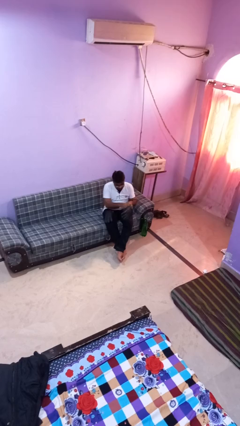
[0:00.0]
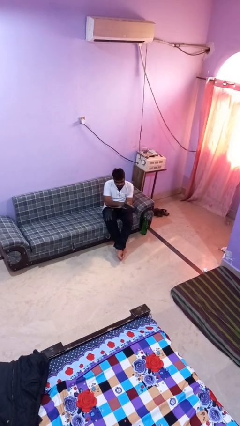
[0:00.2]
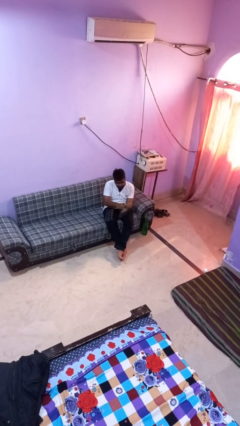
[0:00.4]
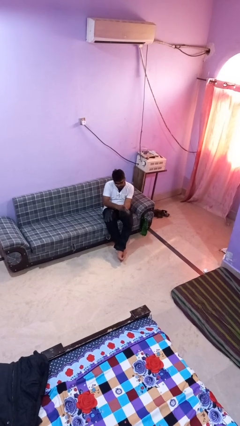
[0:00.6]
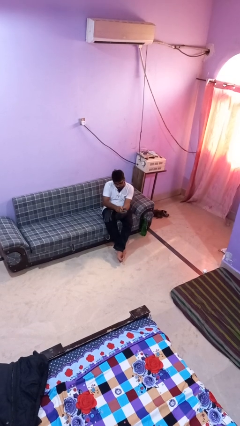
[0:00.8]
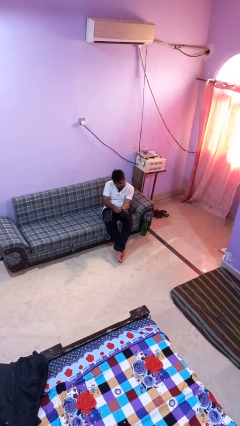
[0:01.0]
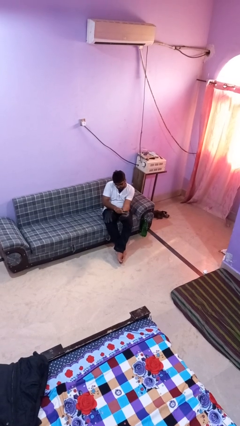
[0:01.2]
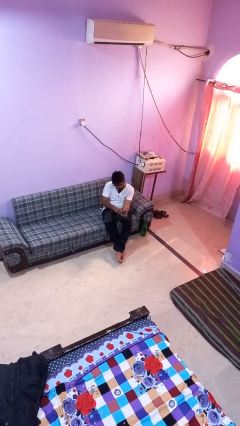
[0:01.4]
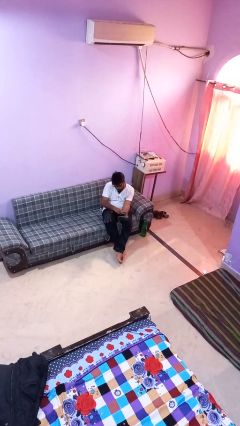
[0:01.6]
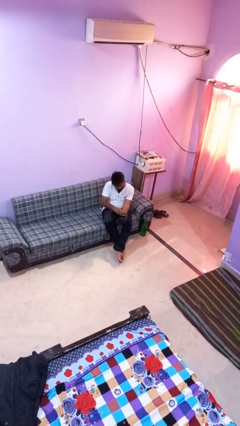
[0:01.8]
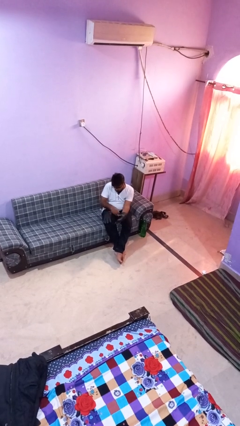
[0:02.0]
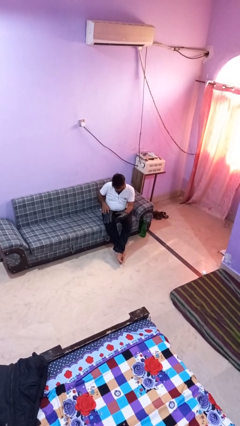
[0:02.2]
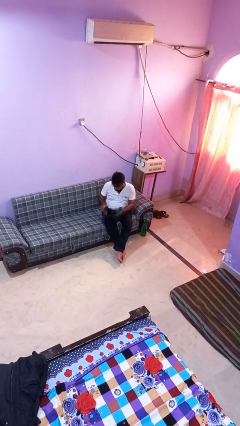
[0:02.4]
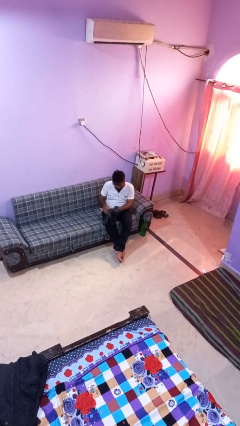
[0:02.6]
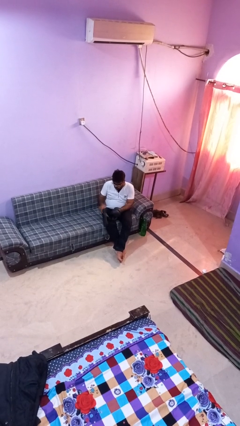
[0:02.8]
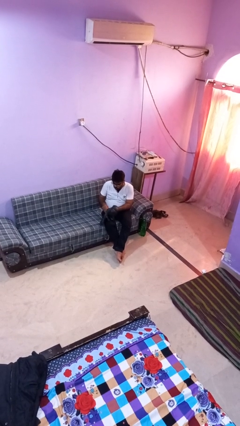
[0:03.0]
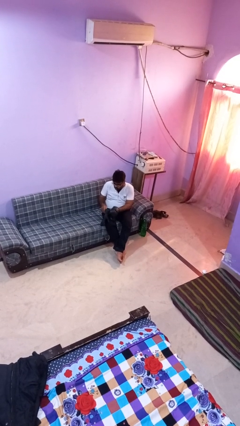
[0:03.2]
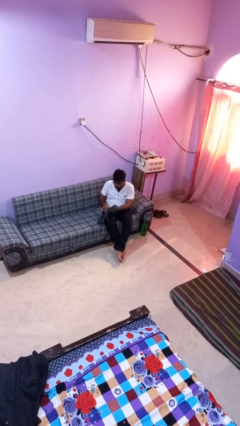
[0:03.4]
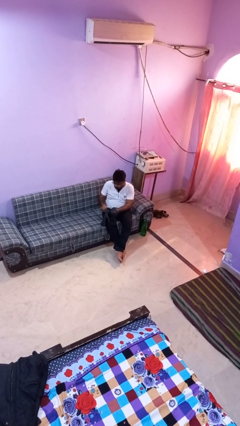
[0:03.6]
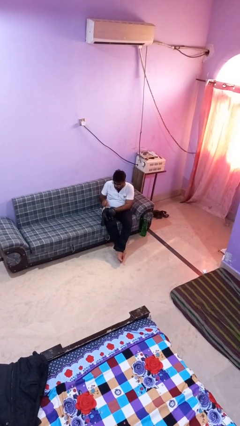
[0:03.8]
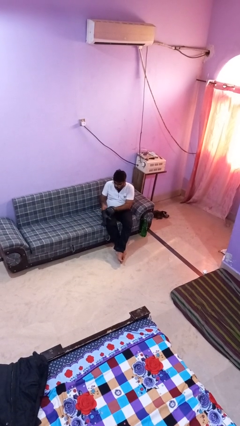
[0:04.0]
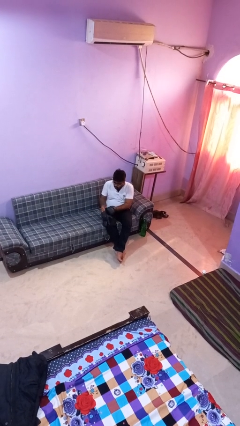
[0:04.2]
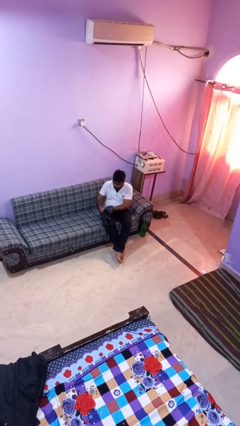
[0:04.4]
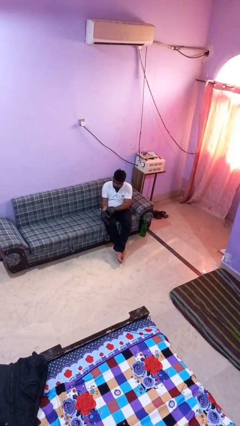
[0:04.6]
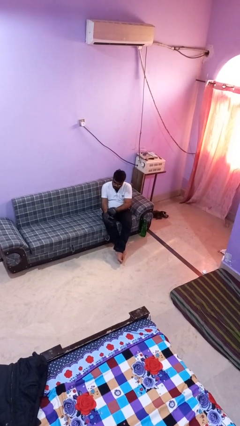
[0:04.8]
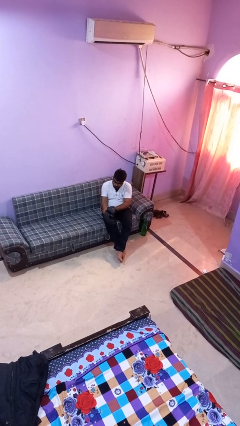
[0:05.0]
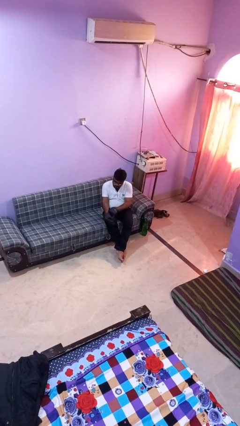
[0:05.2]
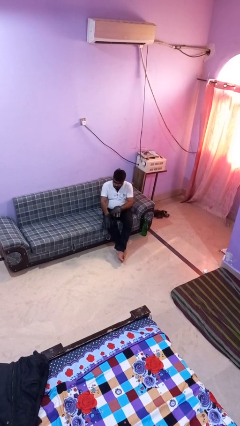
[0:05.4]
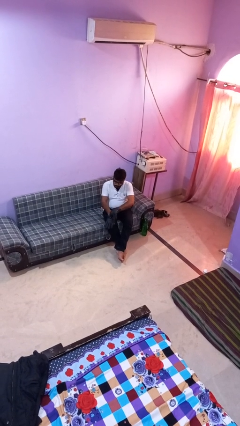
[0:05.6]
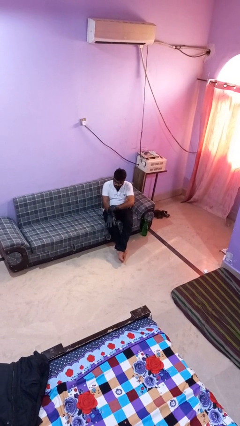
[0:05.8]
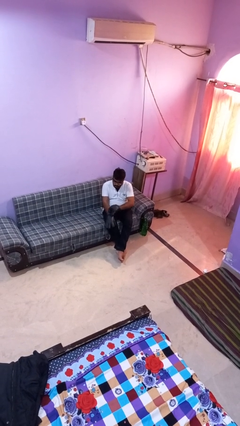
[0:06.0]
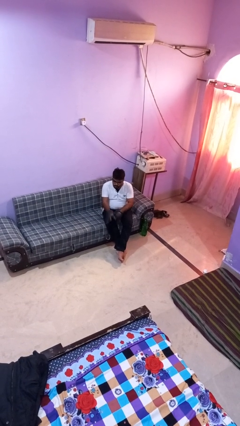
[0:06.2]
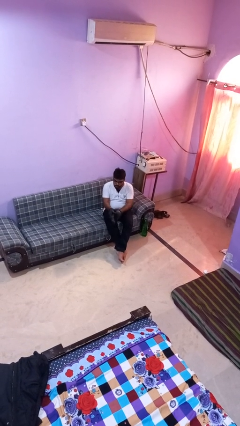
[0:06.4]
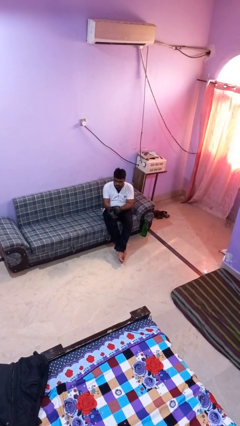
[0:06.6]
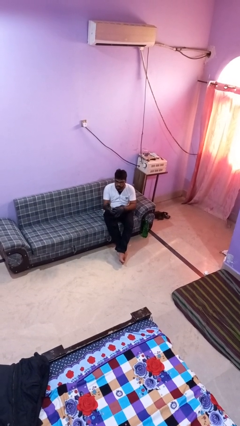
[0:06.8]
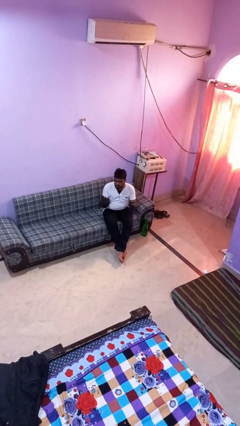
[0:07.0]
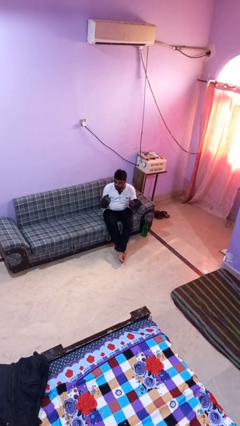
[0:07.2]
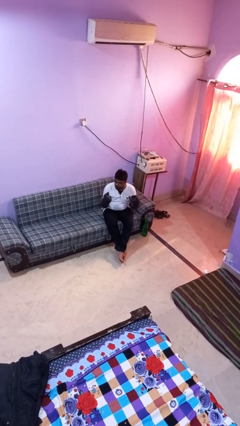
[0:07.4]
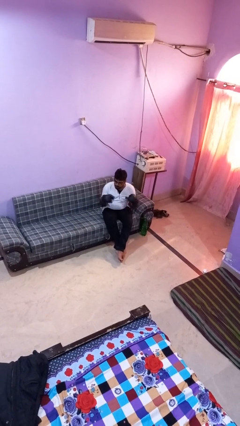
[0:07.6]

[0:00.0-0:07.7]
person puts on gloves

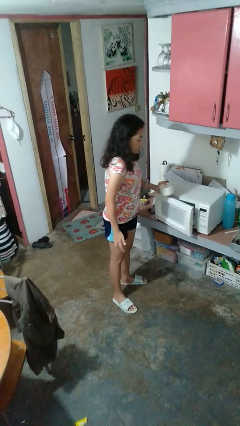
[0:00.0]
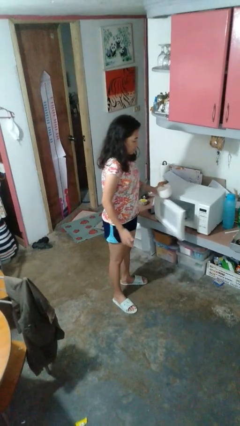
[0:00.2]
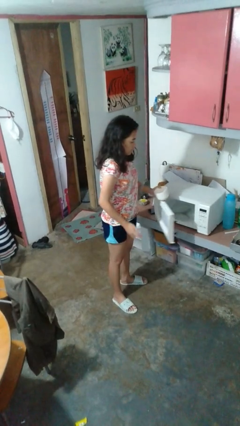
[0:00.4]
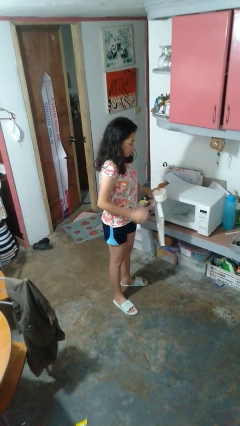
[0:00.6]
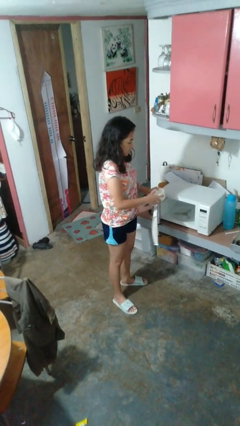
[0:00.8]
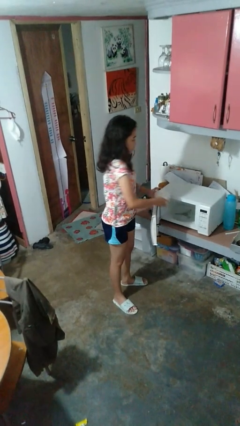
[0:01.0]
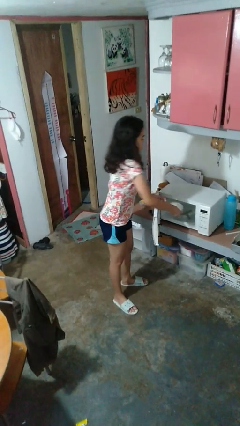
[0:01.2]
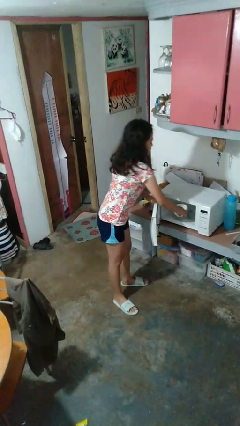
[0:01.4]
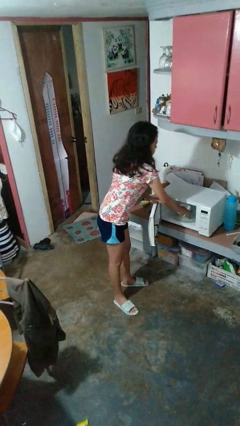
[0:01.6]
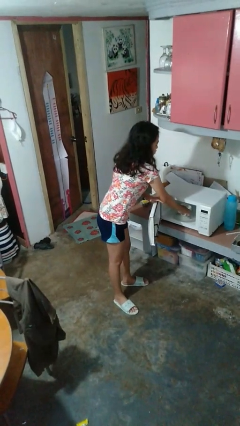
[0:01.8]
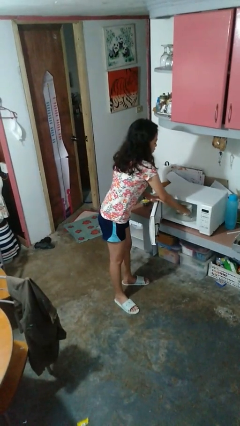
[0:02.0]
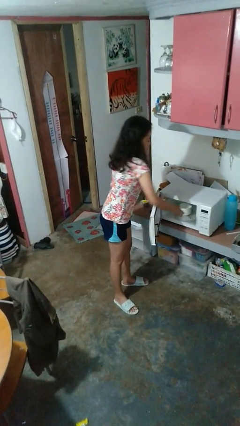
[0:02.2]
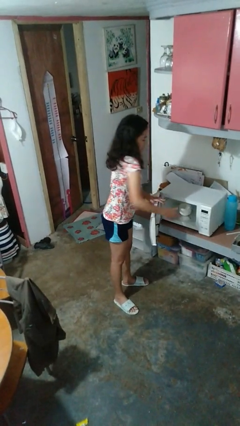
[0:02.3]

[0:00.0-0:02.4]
person puts object into microwave

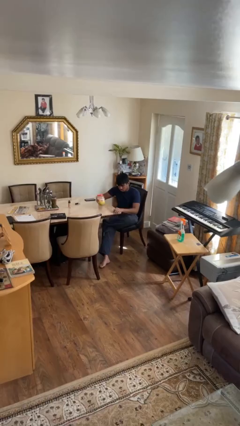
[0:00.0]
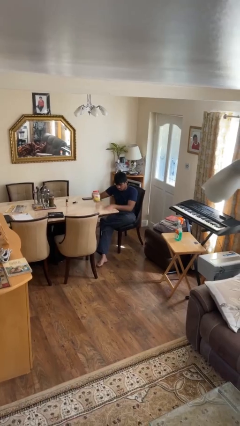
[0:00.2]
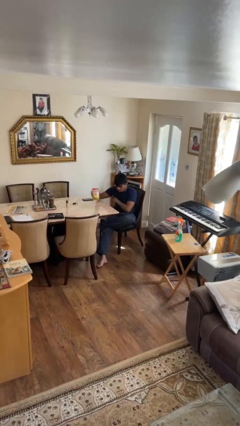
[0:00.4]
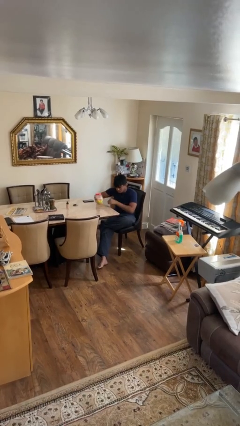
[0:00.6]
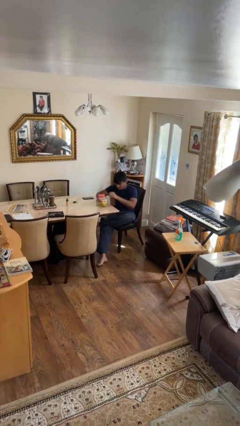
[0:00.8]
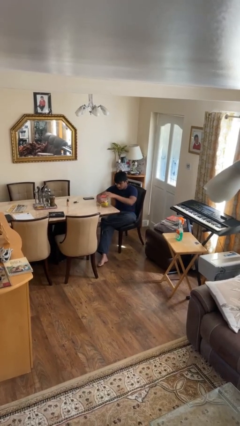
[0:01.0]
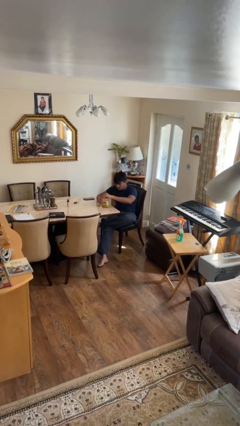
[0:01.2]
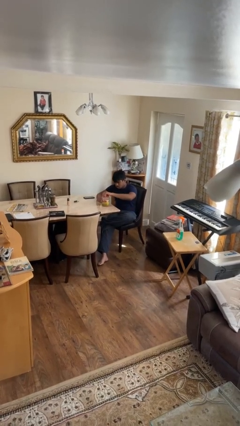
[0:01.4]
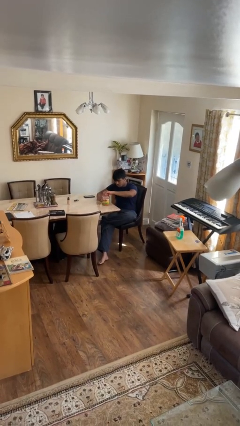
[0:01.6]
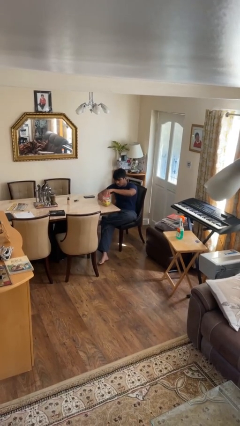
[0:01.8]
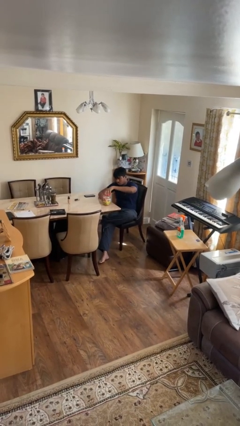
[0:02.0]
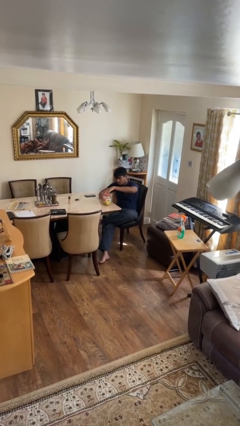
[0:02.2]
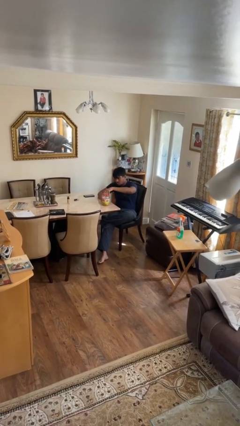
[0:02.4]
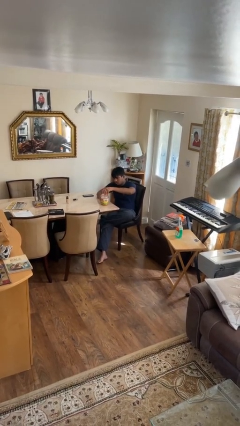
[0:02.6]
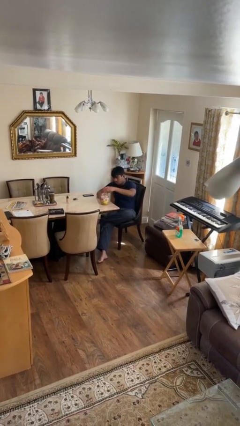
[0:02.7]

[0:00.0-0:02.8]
person opens jar

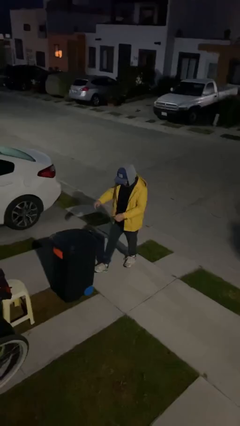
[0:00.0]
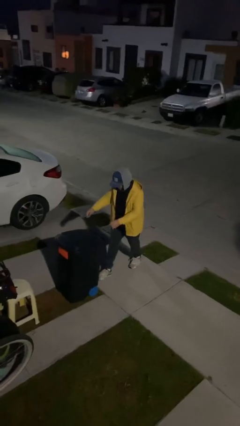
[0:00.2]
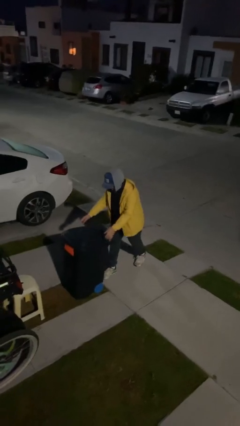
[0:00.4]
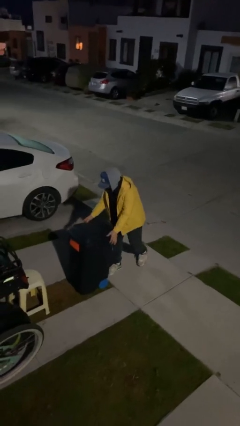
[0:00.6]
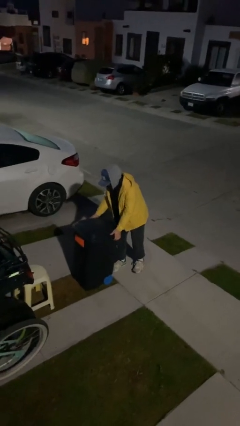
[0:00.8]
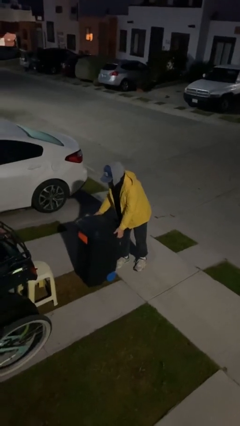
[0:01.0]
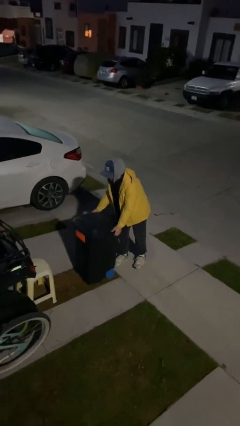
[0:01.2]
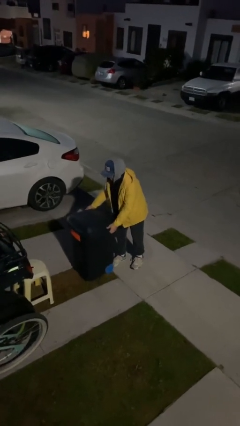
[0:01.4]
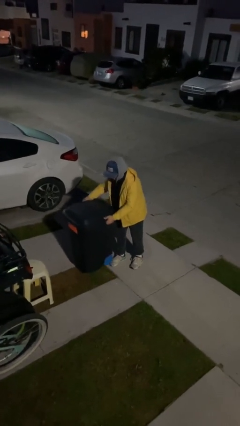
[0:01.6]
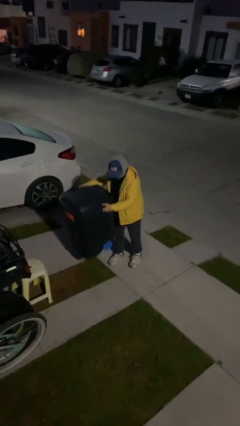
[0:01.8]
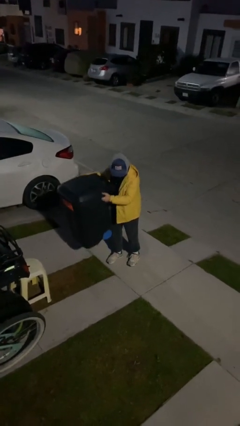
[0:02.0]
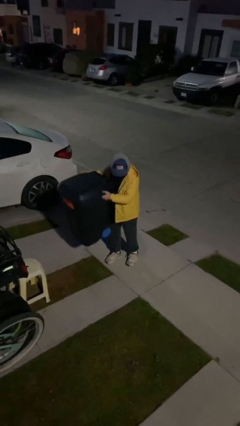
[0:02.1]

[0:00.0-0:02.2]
person picks up object from floor

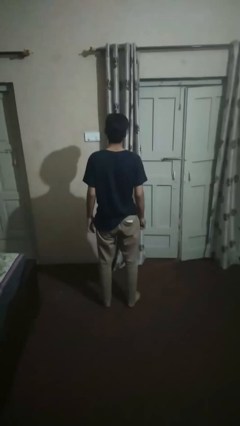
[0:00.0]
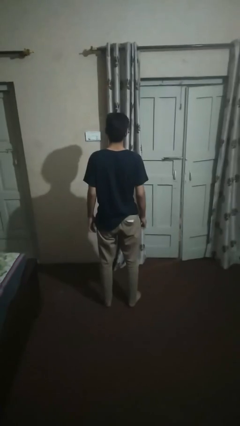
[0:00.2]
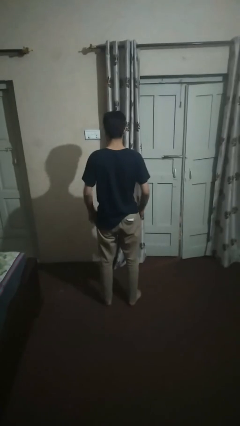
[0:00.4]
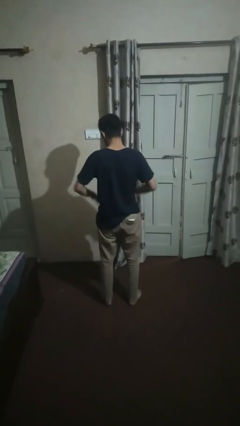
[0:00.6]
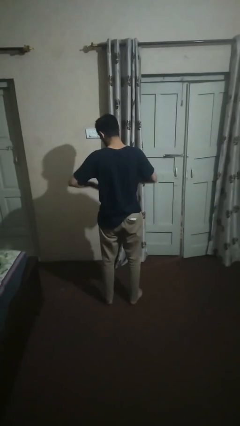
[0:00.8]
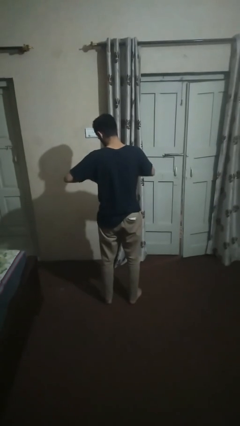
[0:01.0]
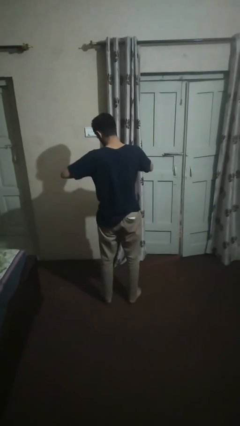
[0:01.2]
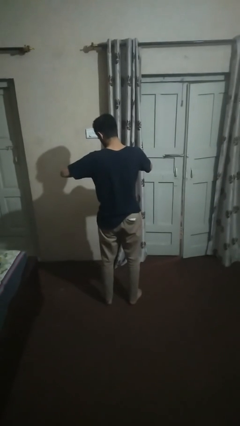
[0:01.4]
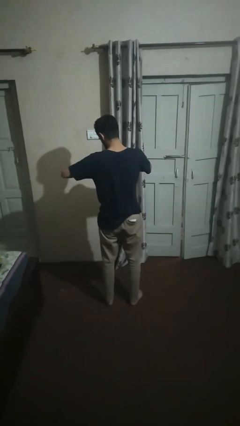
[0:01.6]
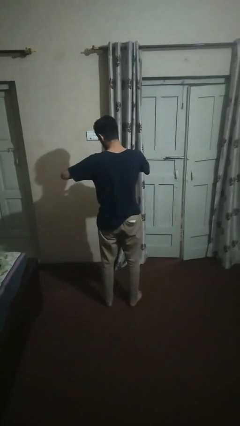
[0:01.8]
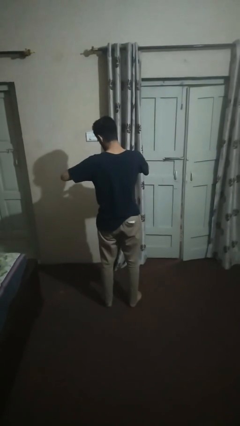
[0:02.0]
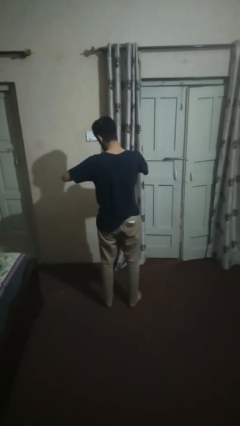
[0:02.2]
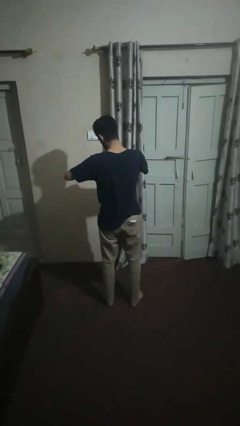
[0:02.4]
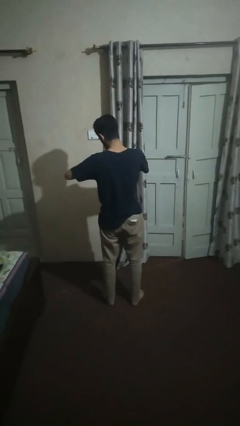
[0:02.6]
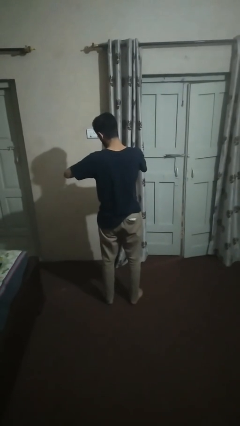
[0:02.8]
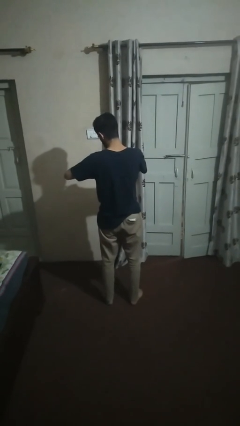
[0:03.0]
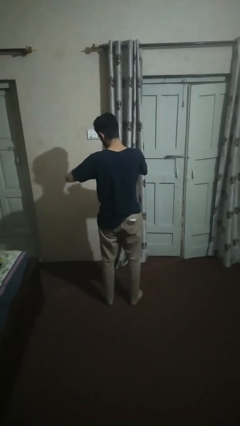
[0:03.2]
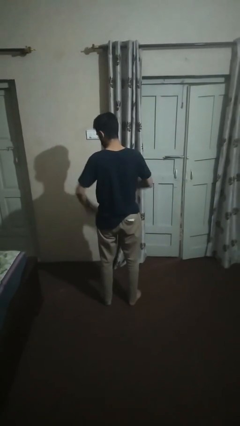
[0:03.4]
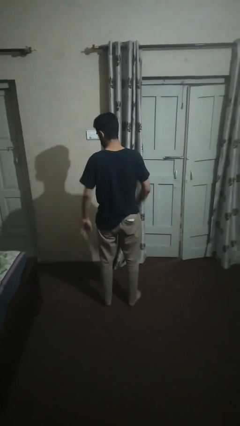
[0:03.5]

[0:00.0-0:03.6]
person puts on ring
